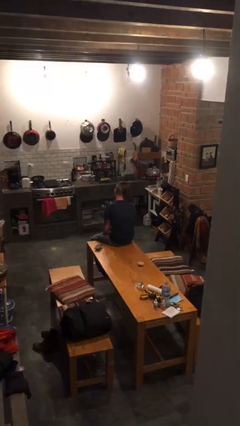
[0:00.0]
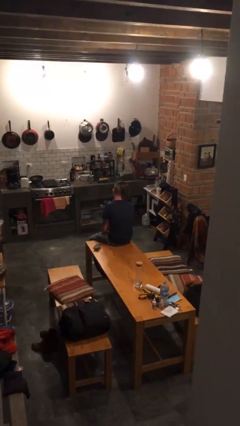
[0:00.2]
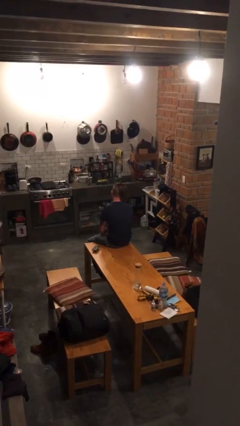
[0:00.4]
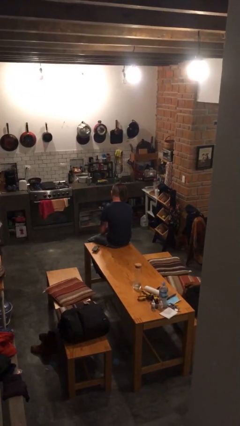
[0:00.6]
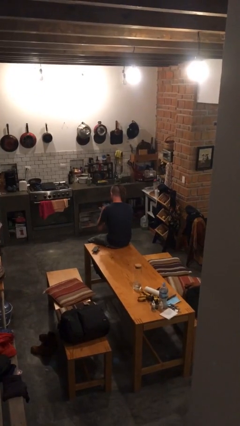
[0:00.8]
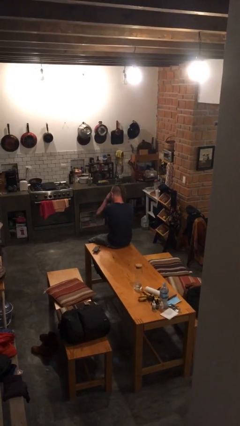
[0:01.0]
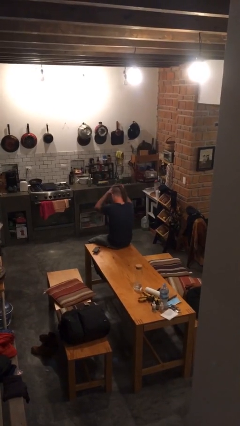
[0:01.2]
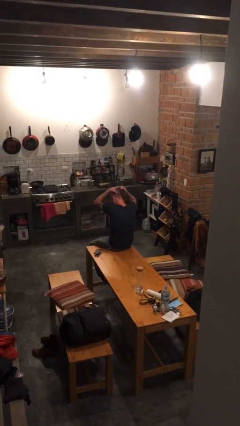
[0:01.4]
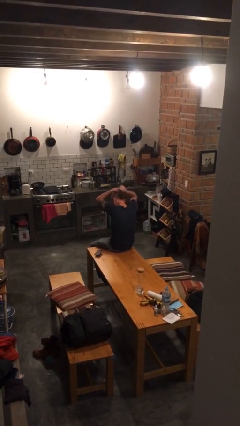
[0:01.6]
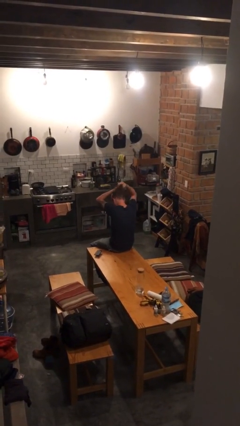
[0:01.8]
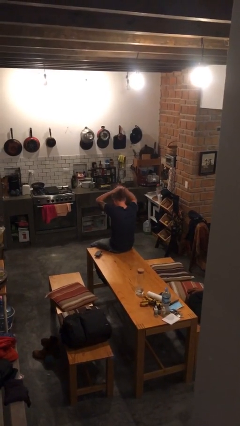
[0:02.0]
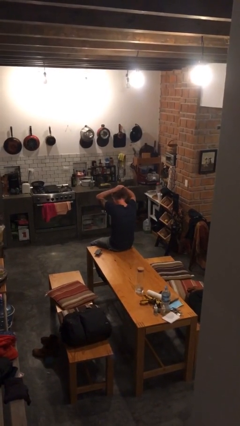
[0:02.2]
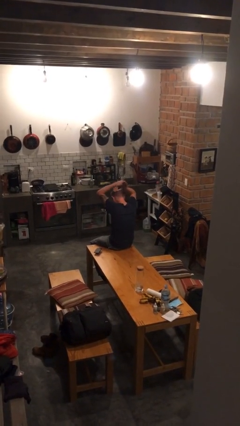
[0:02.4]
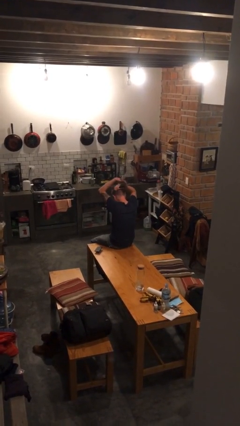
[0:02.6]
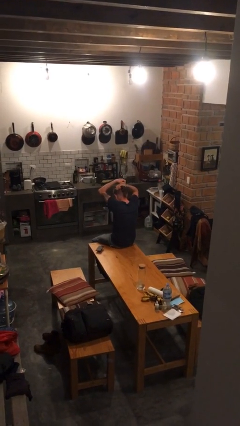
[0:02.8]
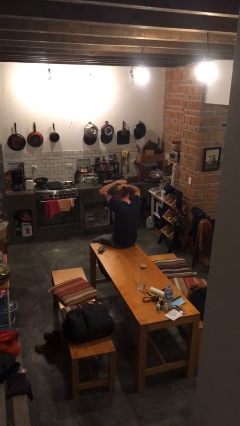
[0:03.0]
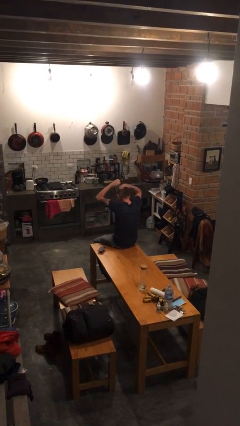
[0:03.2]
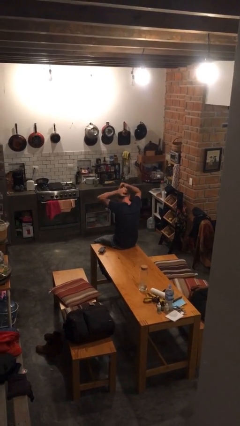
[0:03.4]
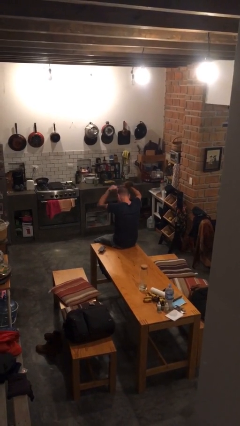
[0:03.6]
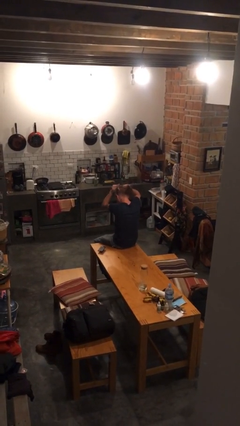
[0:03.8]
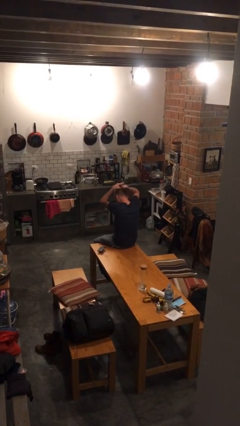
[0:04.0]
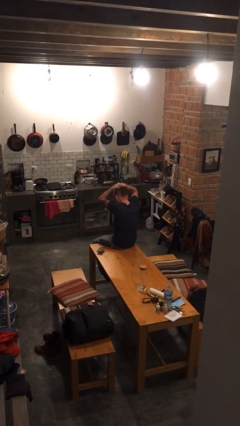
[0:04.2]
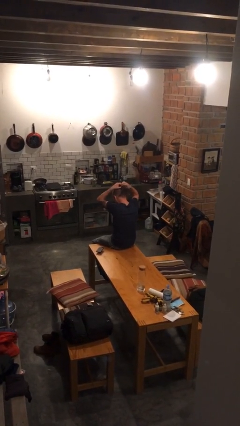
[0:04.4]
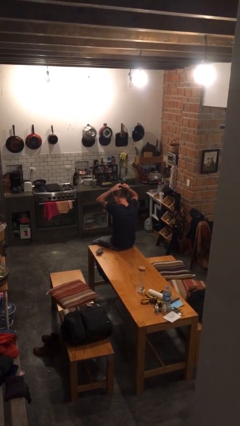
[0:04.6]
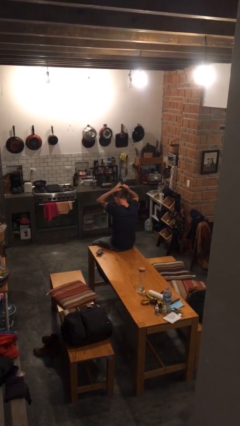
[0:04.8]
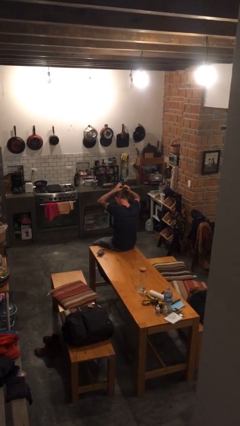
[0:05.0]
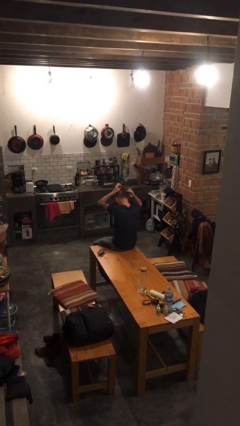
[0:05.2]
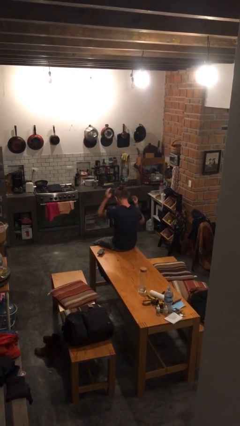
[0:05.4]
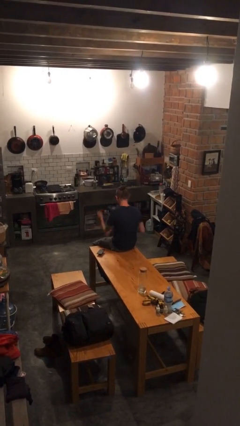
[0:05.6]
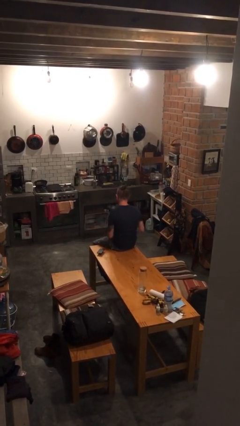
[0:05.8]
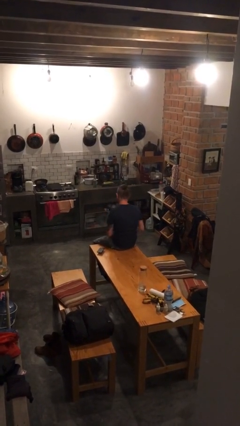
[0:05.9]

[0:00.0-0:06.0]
person puts hair in ponytail

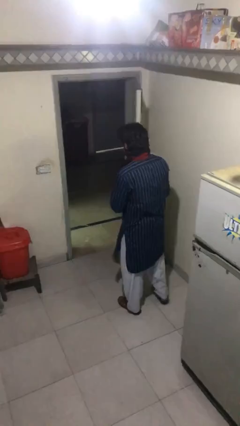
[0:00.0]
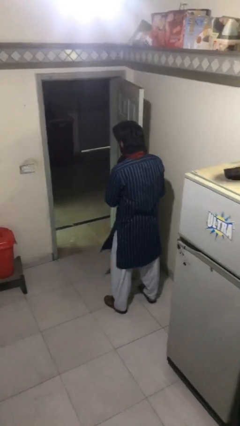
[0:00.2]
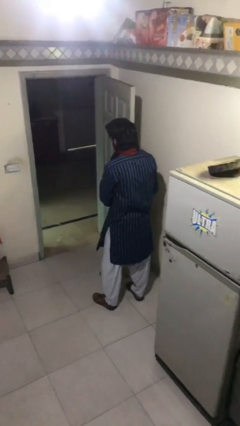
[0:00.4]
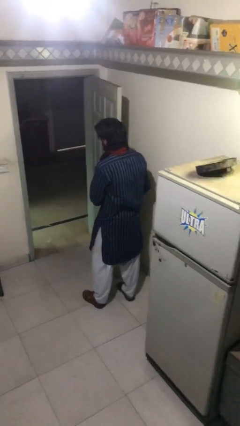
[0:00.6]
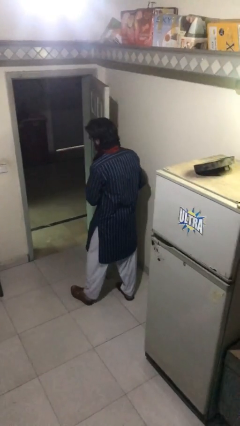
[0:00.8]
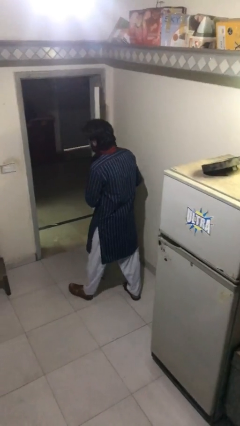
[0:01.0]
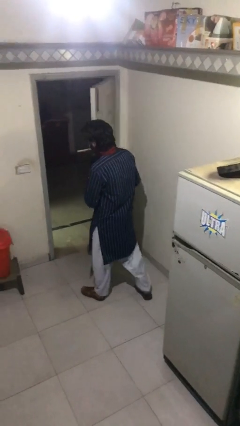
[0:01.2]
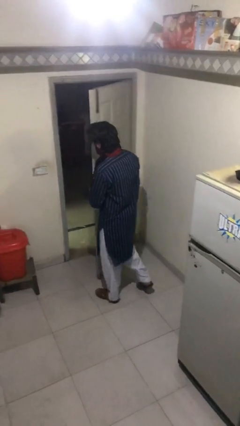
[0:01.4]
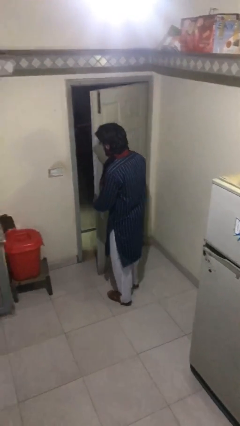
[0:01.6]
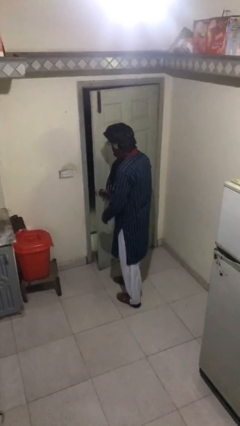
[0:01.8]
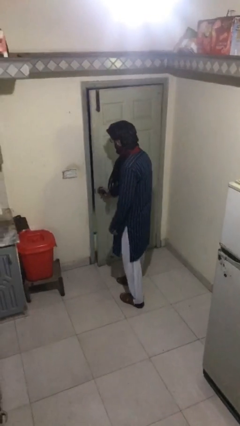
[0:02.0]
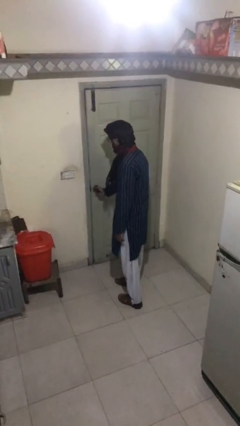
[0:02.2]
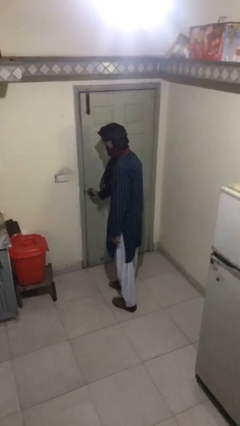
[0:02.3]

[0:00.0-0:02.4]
person closes facility door

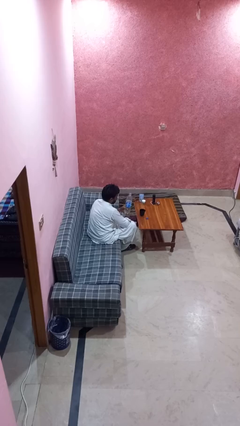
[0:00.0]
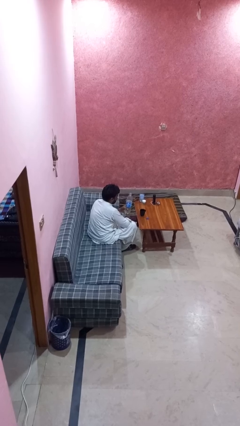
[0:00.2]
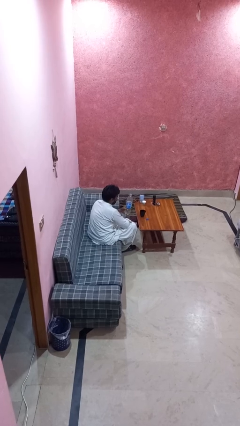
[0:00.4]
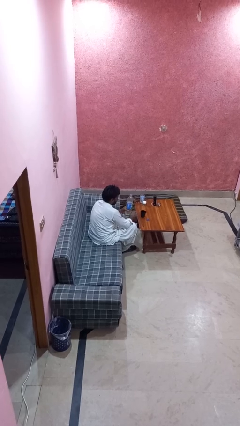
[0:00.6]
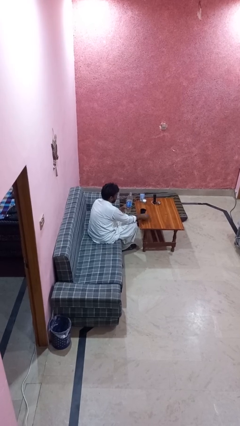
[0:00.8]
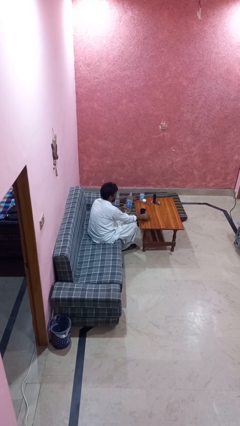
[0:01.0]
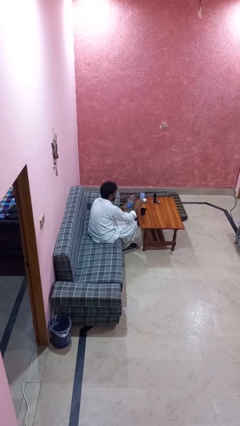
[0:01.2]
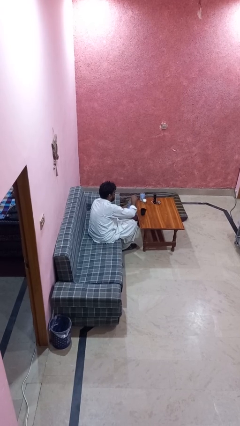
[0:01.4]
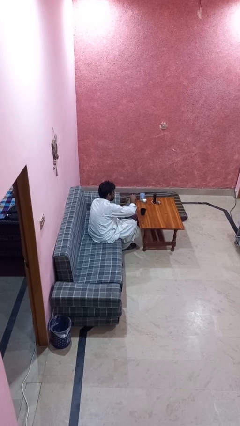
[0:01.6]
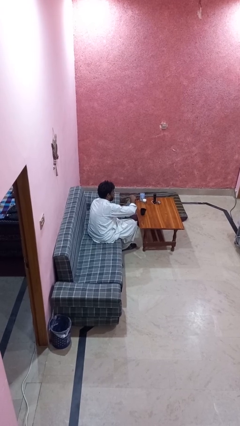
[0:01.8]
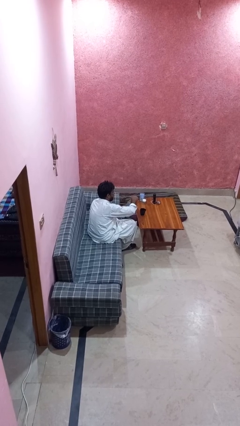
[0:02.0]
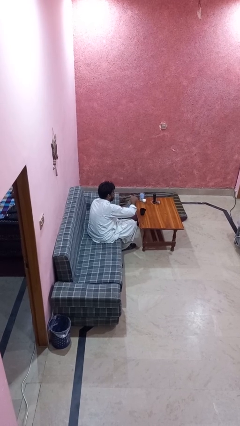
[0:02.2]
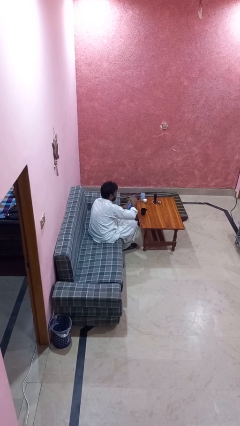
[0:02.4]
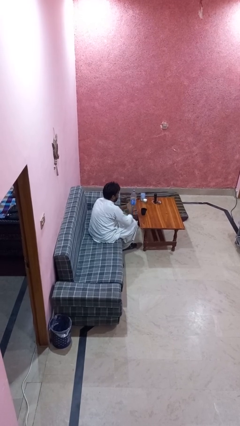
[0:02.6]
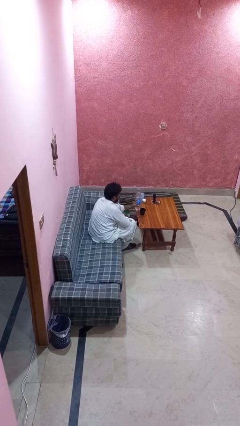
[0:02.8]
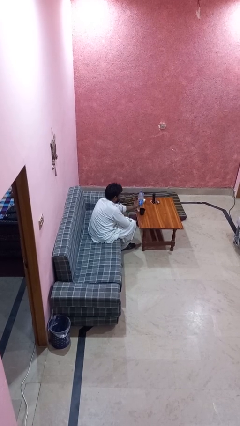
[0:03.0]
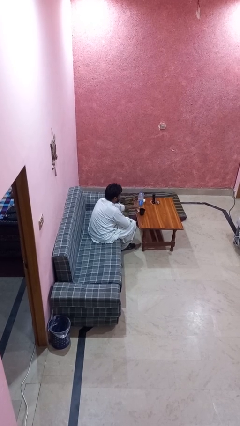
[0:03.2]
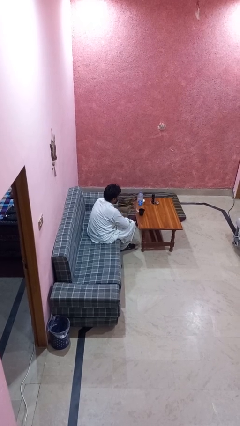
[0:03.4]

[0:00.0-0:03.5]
person screws lid to bottle

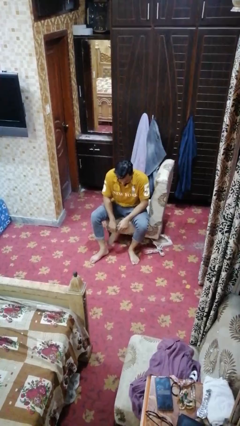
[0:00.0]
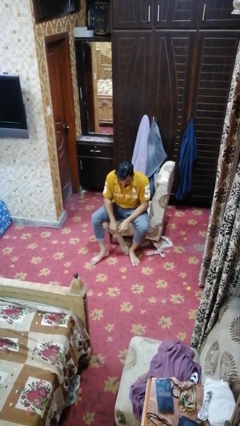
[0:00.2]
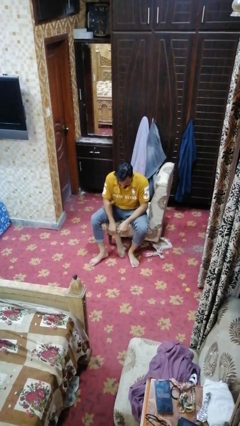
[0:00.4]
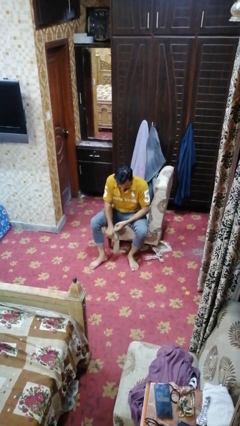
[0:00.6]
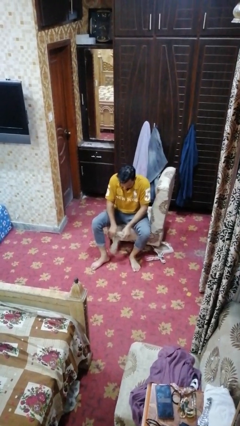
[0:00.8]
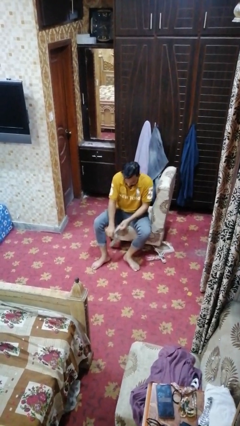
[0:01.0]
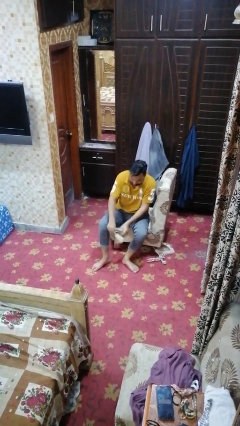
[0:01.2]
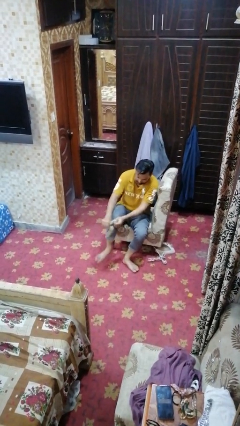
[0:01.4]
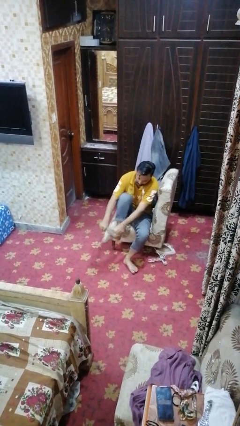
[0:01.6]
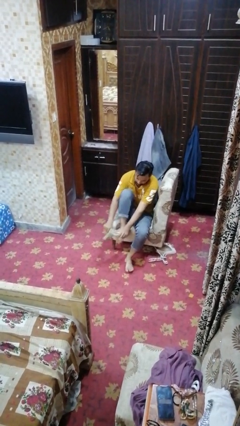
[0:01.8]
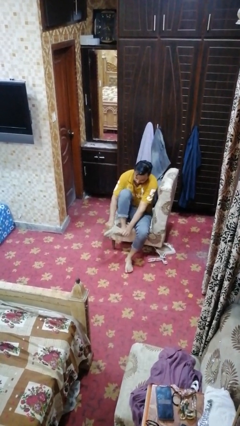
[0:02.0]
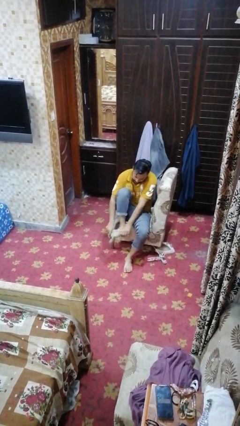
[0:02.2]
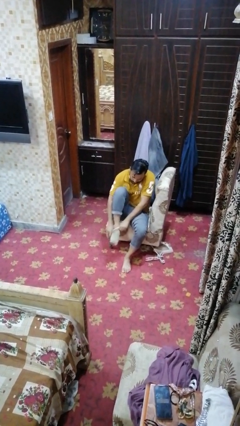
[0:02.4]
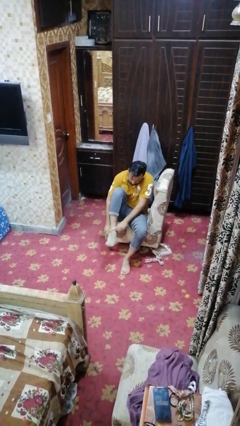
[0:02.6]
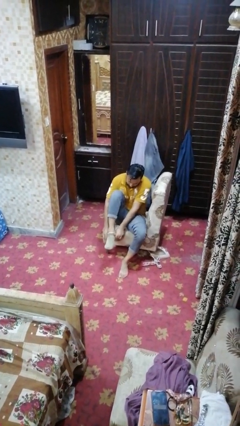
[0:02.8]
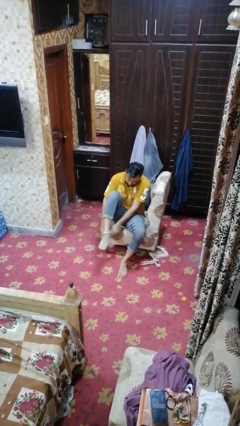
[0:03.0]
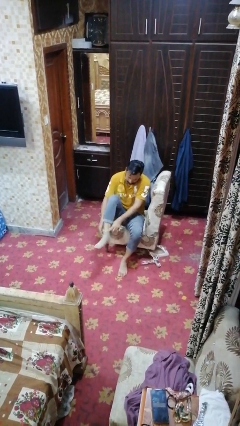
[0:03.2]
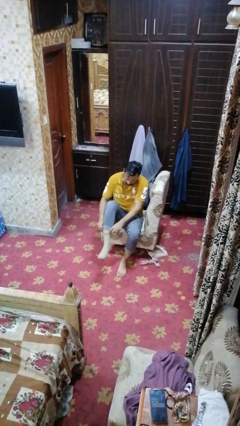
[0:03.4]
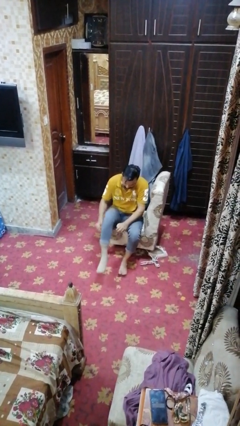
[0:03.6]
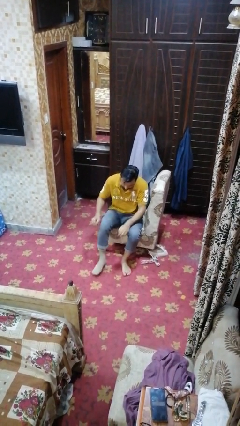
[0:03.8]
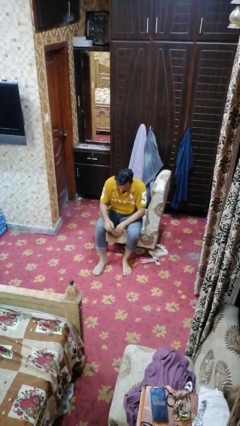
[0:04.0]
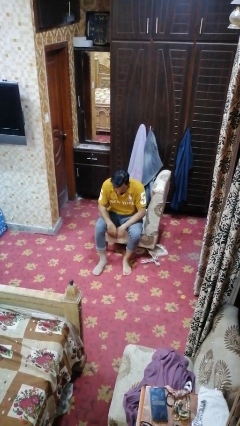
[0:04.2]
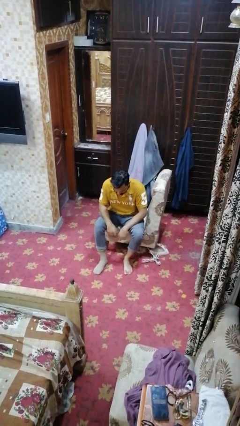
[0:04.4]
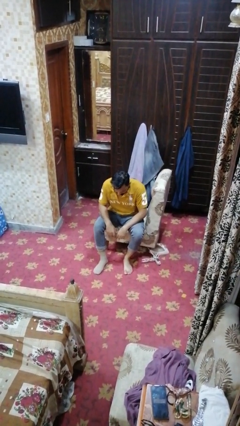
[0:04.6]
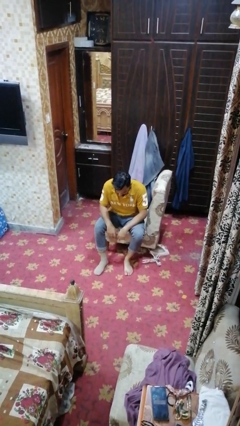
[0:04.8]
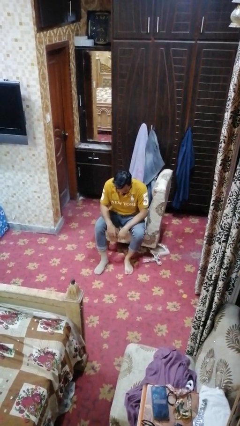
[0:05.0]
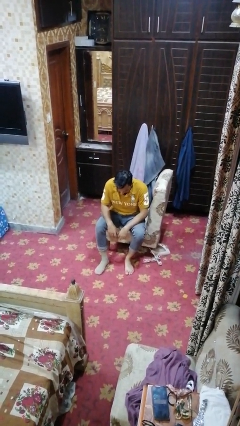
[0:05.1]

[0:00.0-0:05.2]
person puts on socks

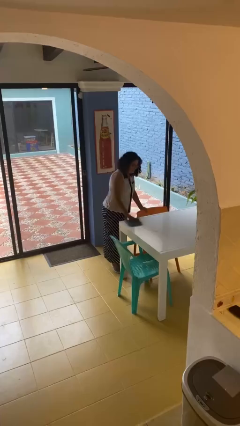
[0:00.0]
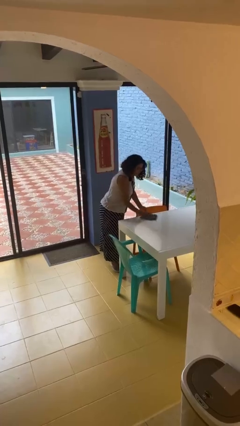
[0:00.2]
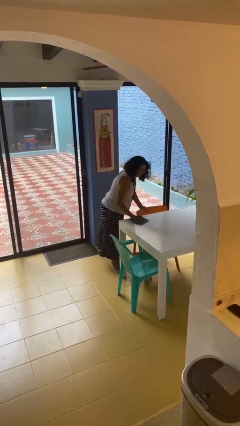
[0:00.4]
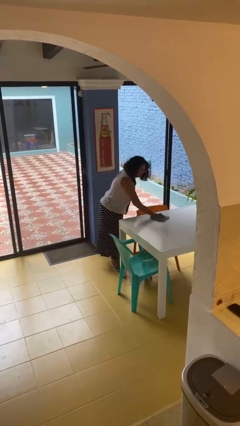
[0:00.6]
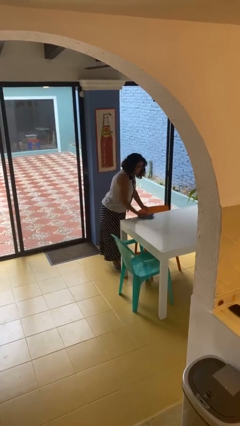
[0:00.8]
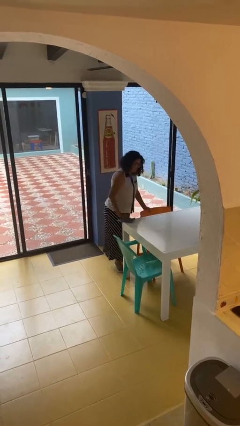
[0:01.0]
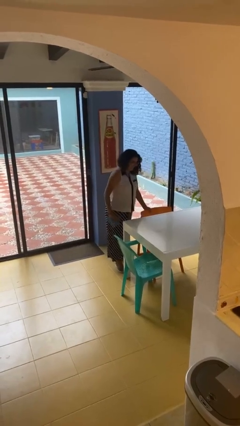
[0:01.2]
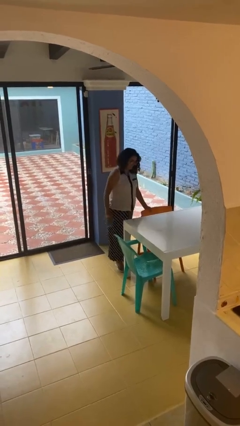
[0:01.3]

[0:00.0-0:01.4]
person cleans table with rag
